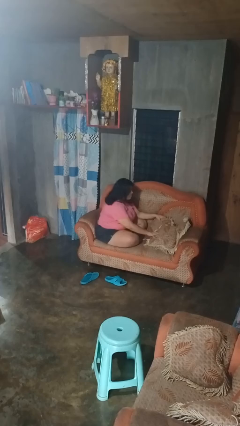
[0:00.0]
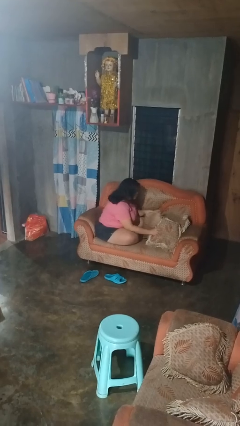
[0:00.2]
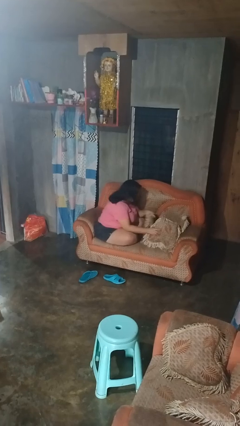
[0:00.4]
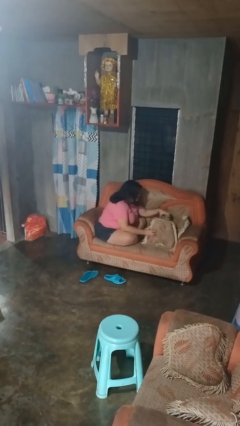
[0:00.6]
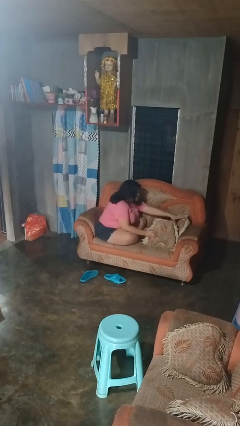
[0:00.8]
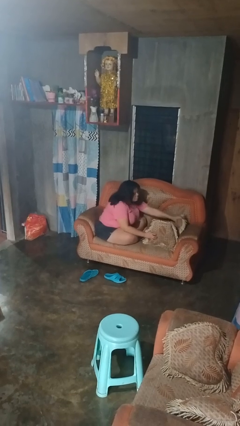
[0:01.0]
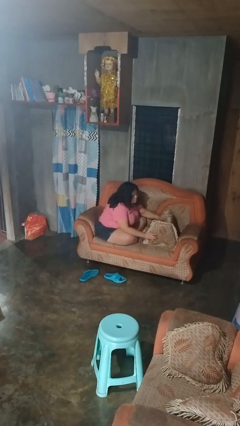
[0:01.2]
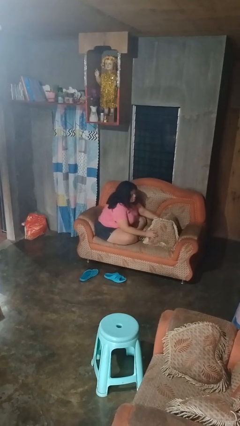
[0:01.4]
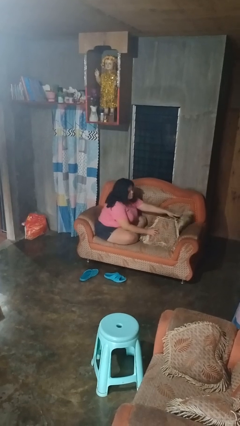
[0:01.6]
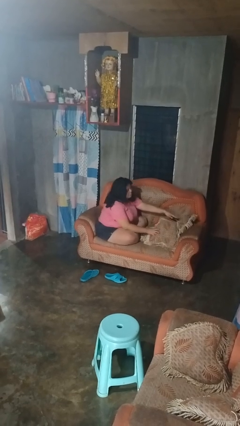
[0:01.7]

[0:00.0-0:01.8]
person searches in couch

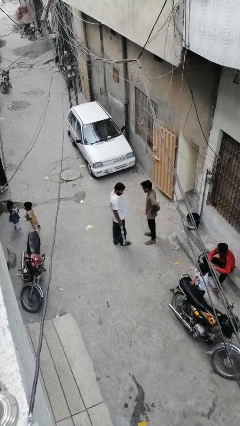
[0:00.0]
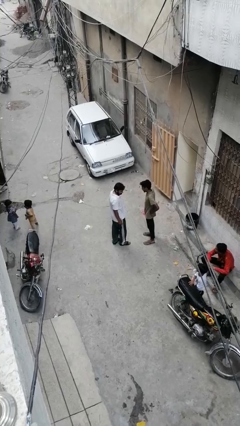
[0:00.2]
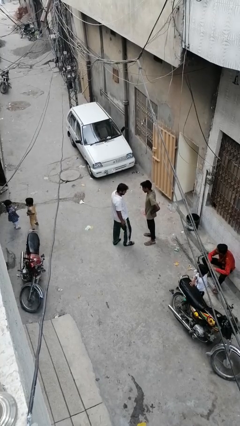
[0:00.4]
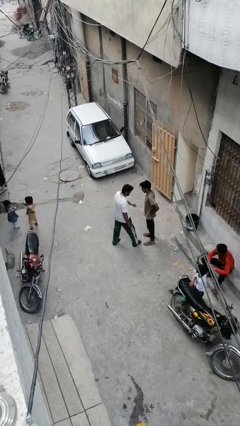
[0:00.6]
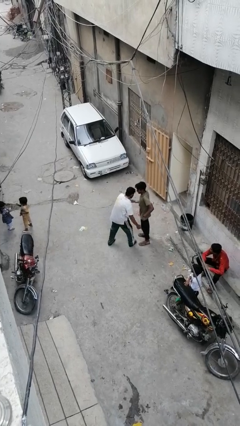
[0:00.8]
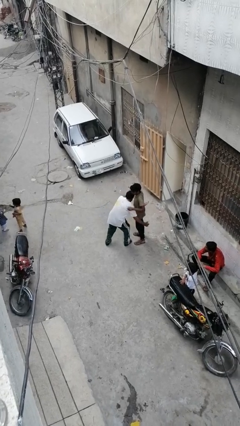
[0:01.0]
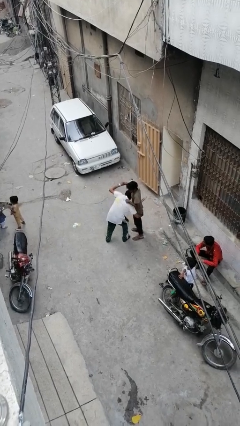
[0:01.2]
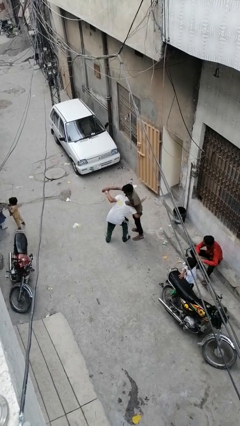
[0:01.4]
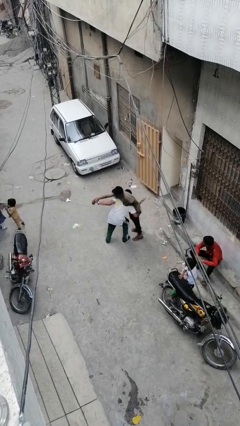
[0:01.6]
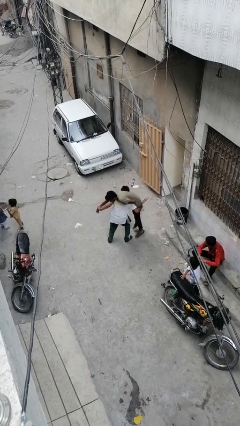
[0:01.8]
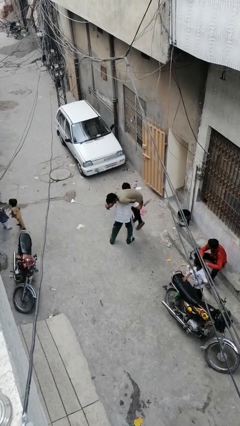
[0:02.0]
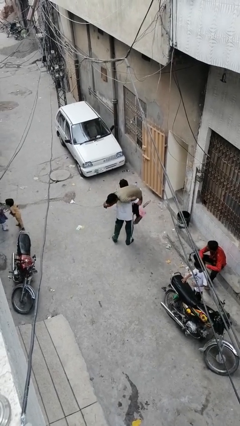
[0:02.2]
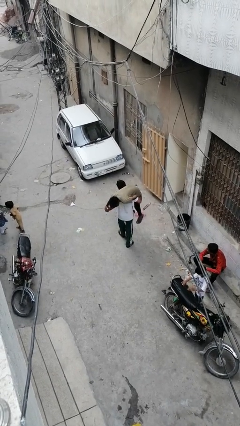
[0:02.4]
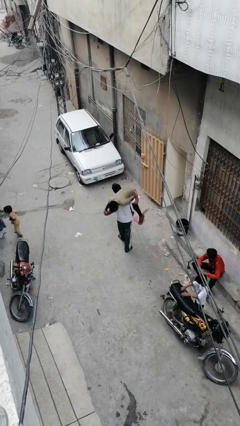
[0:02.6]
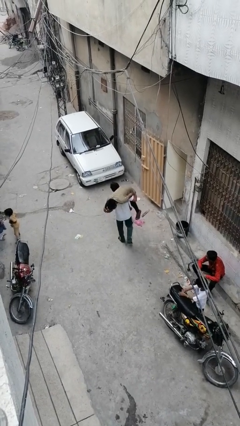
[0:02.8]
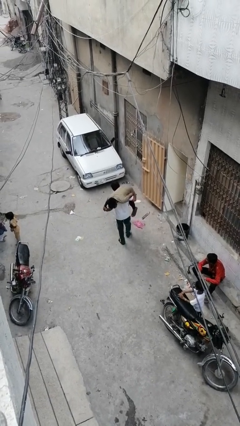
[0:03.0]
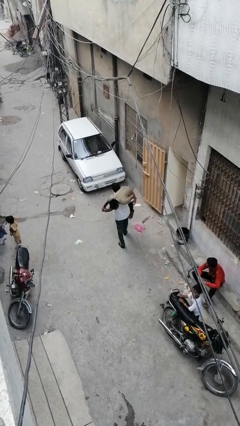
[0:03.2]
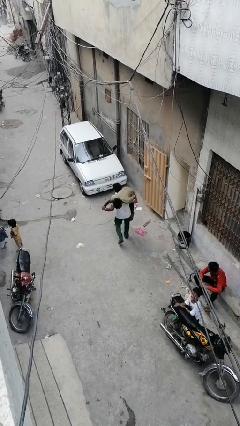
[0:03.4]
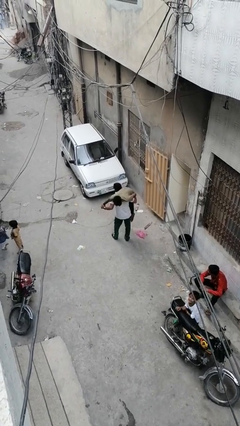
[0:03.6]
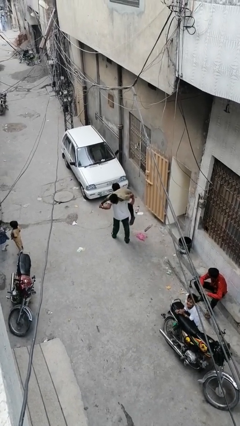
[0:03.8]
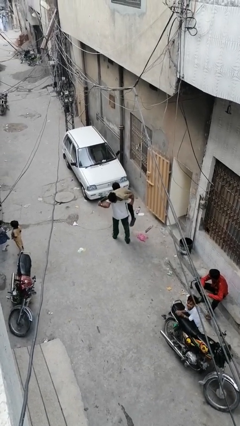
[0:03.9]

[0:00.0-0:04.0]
person carries person over shoulder

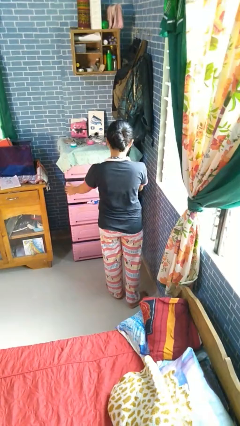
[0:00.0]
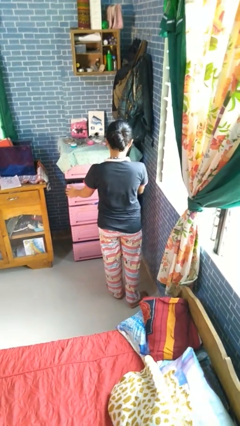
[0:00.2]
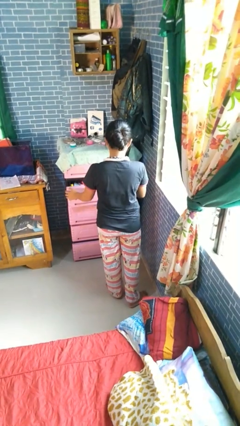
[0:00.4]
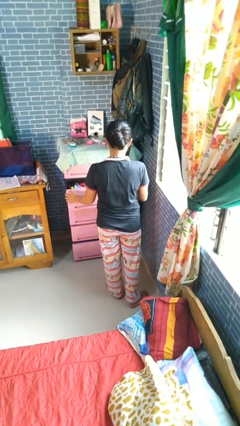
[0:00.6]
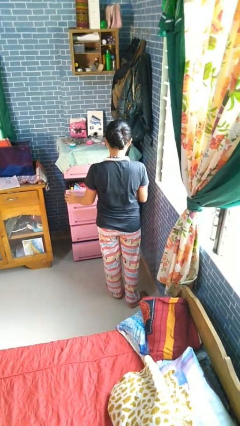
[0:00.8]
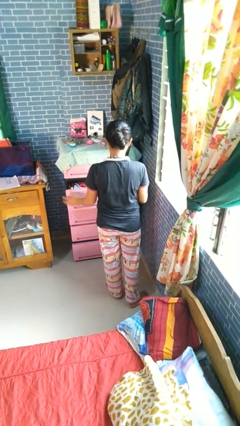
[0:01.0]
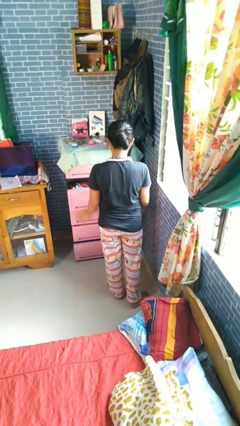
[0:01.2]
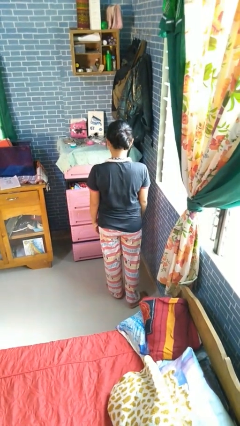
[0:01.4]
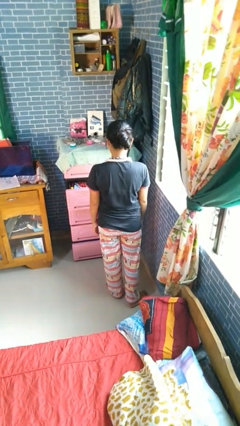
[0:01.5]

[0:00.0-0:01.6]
person opens dresser drawer

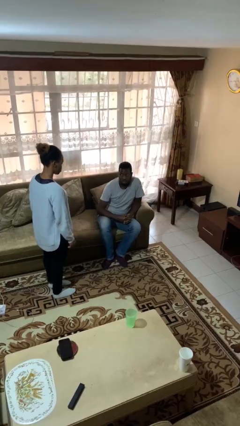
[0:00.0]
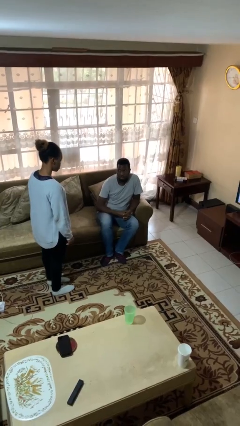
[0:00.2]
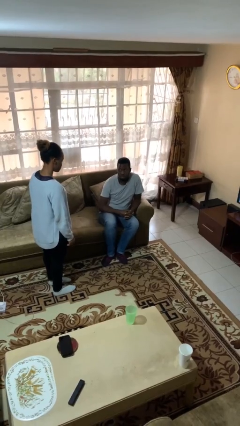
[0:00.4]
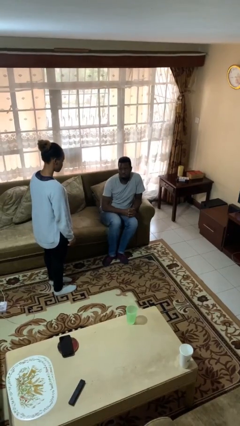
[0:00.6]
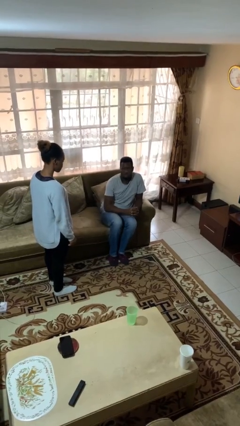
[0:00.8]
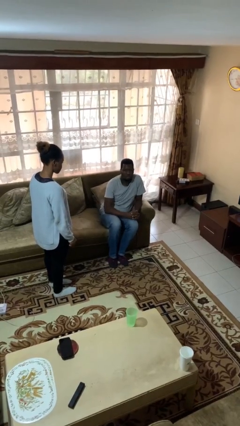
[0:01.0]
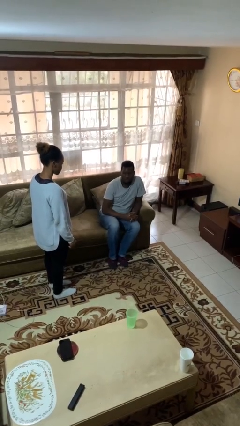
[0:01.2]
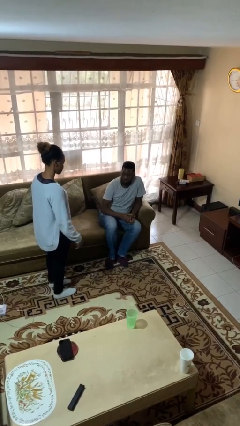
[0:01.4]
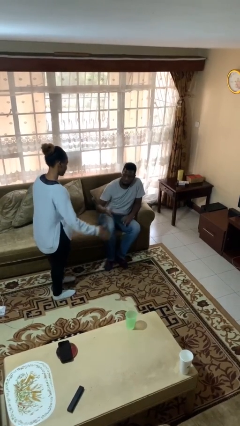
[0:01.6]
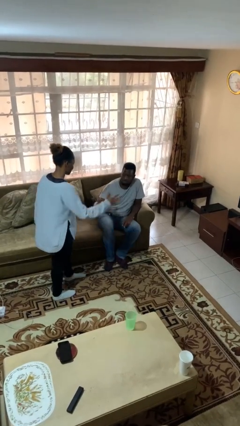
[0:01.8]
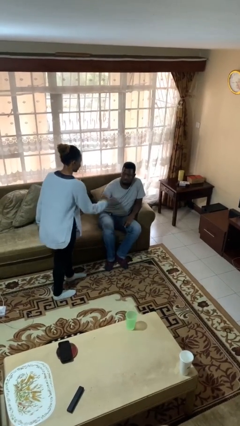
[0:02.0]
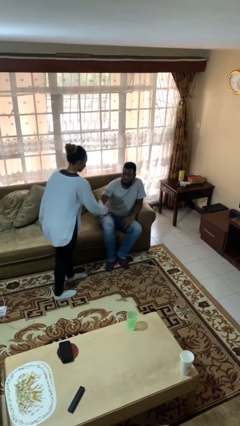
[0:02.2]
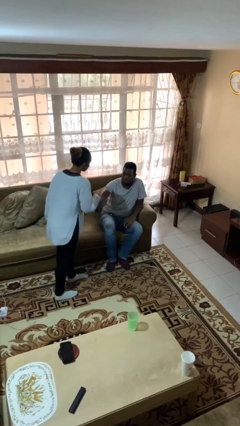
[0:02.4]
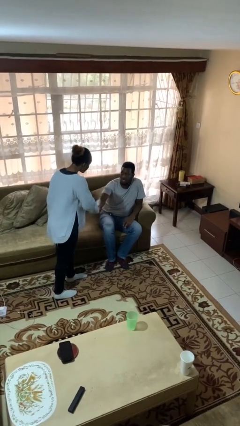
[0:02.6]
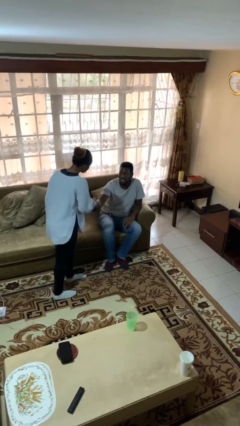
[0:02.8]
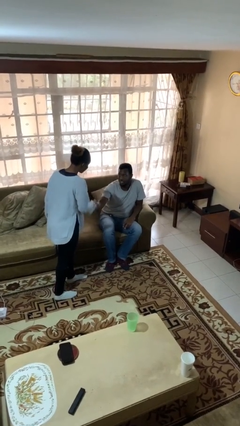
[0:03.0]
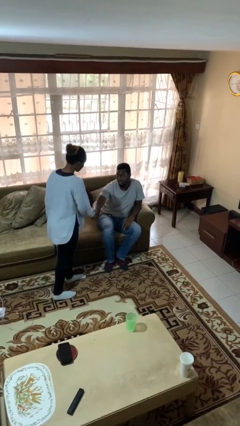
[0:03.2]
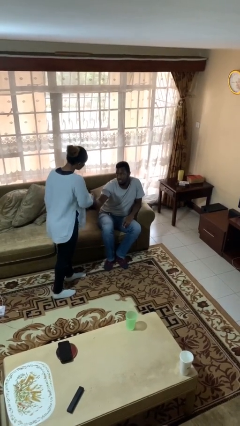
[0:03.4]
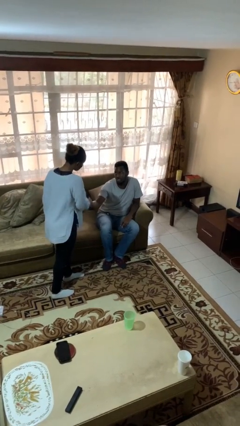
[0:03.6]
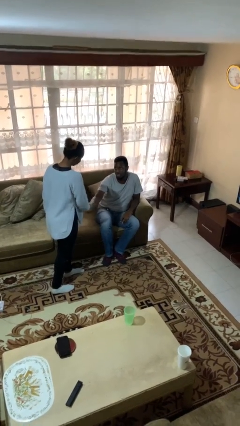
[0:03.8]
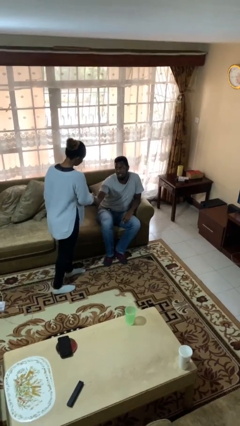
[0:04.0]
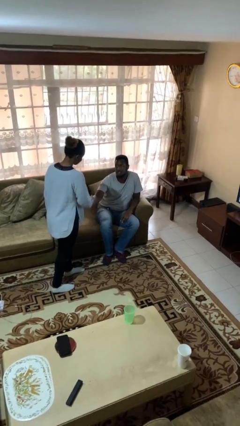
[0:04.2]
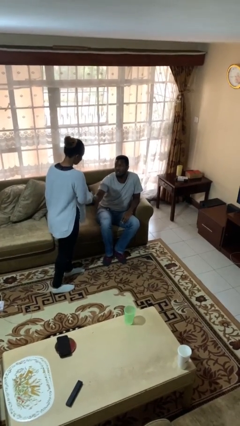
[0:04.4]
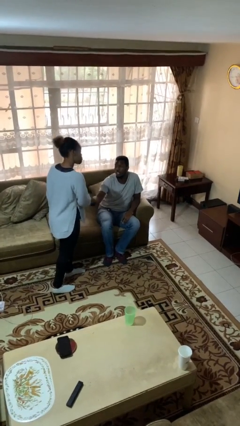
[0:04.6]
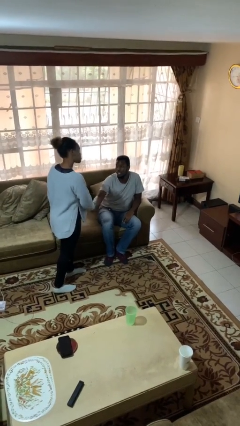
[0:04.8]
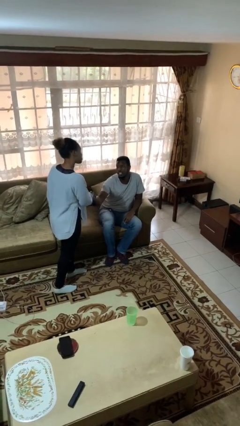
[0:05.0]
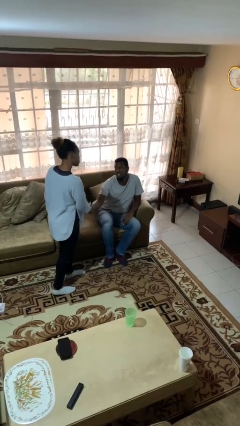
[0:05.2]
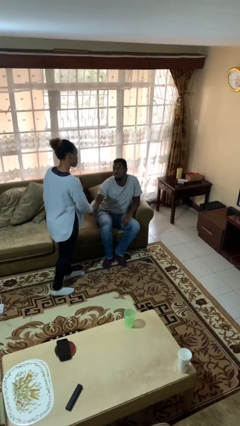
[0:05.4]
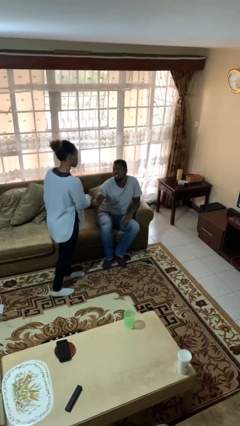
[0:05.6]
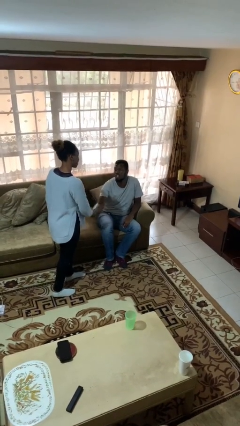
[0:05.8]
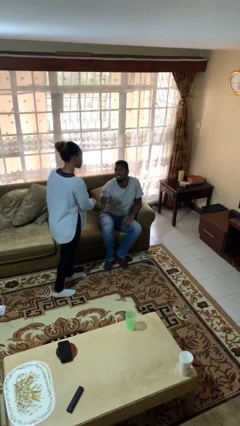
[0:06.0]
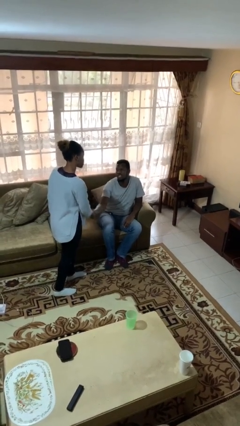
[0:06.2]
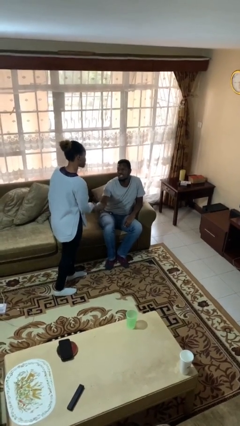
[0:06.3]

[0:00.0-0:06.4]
person shakes hand

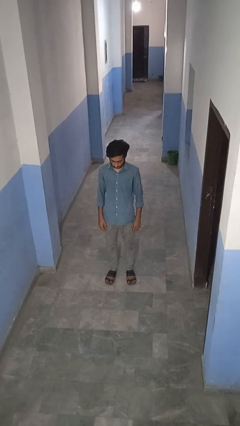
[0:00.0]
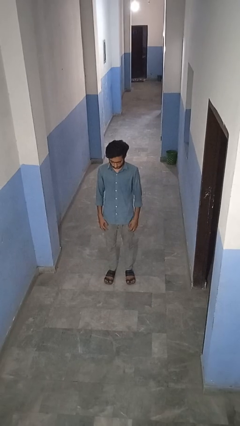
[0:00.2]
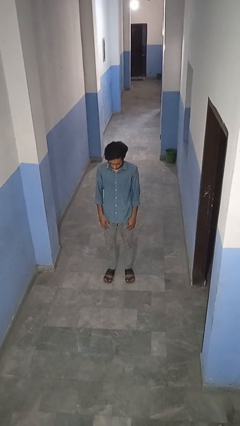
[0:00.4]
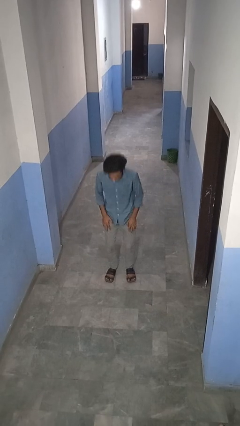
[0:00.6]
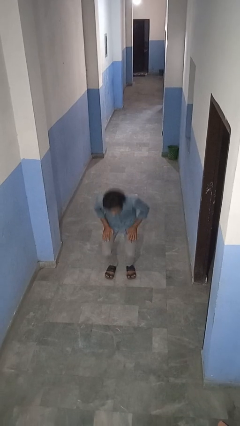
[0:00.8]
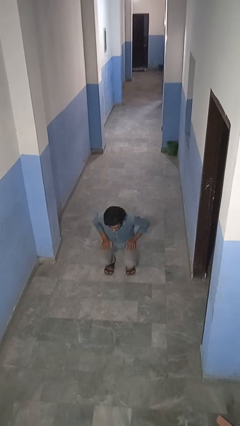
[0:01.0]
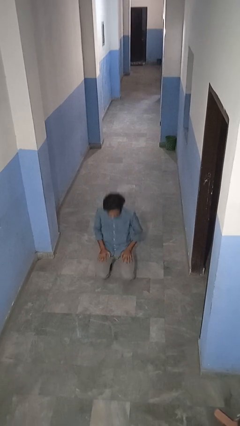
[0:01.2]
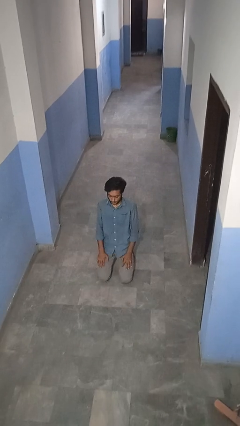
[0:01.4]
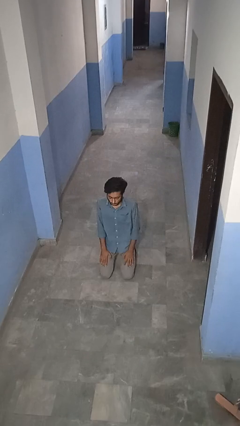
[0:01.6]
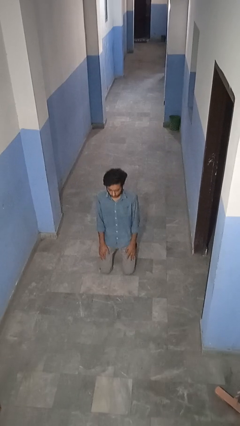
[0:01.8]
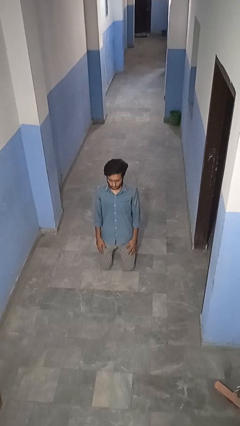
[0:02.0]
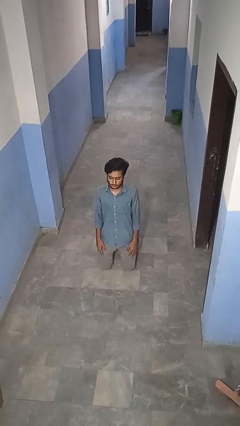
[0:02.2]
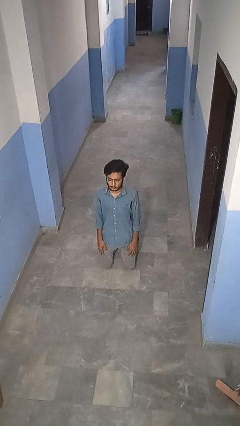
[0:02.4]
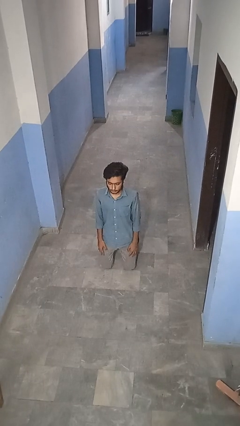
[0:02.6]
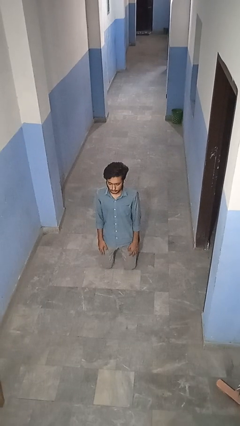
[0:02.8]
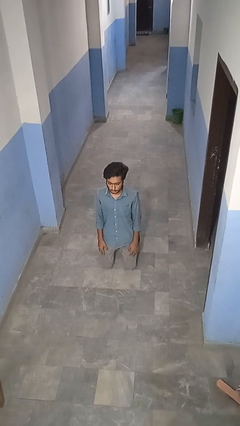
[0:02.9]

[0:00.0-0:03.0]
person kneels

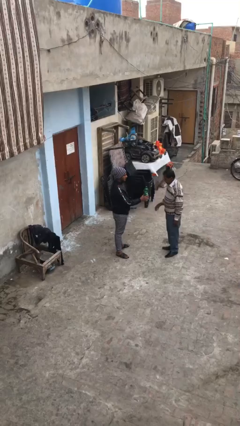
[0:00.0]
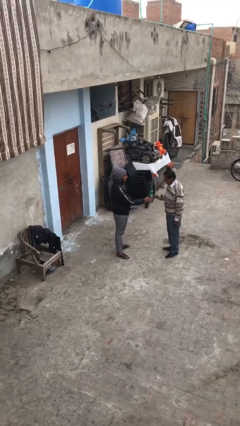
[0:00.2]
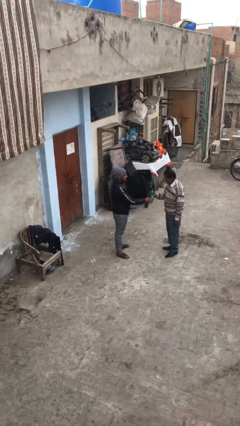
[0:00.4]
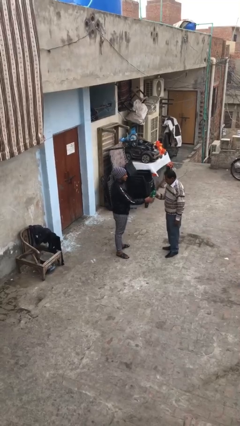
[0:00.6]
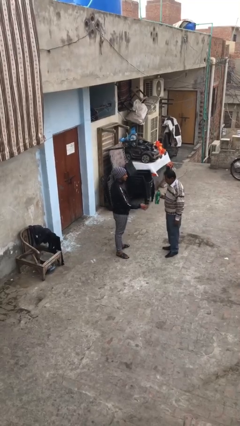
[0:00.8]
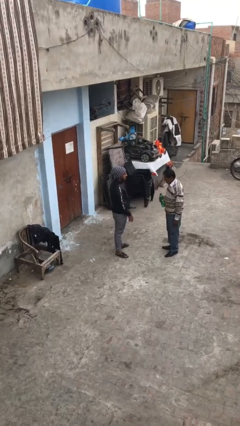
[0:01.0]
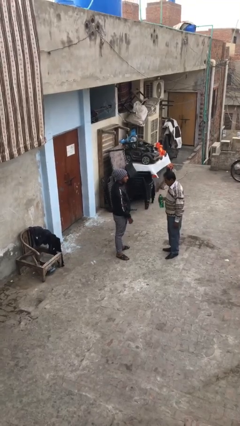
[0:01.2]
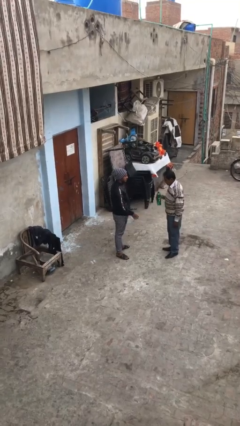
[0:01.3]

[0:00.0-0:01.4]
person transfers object to person
